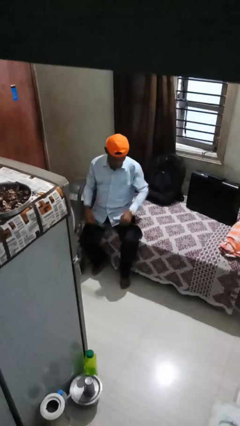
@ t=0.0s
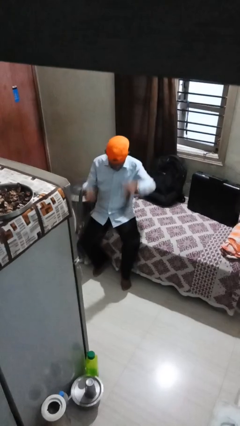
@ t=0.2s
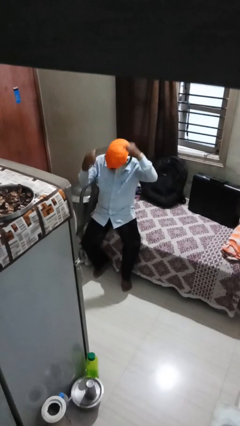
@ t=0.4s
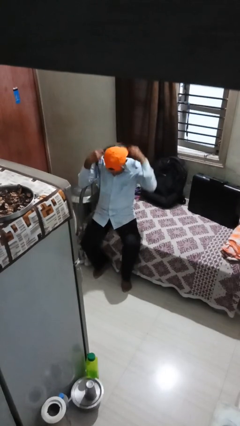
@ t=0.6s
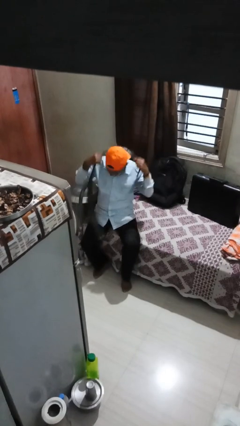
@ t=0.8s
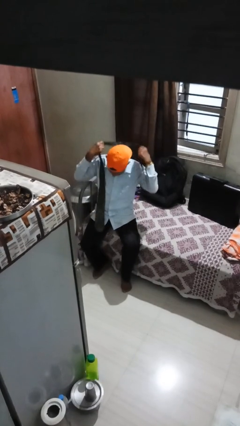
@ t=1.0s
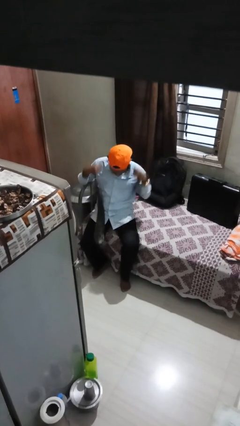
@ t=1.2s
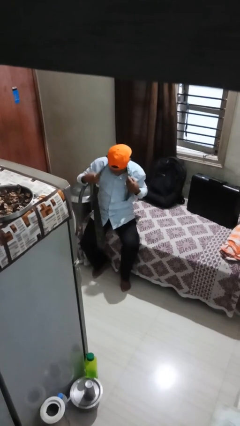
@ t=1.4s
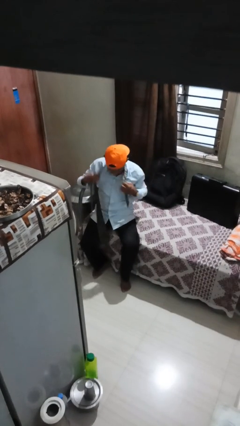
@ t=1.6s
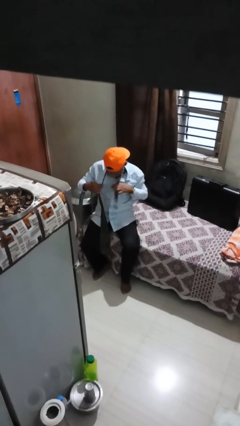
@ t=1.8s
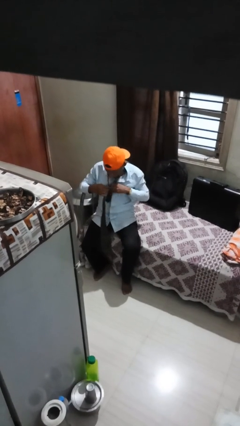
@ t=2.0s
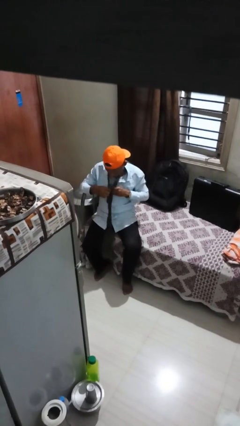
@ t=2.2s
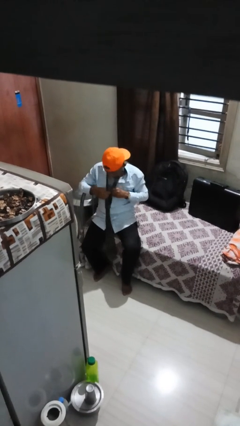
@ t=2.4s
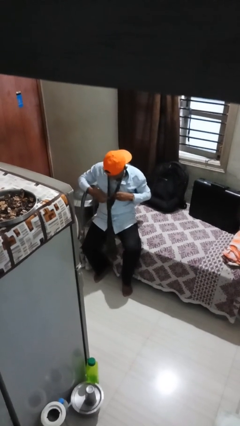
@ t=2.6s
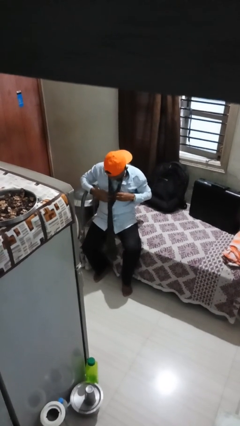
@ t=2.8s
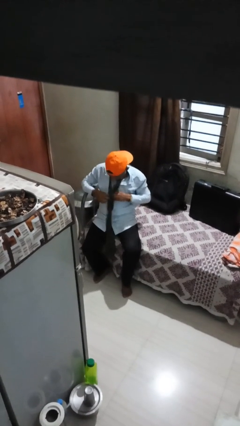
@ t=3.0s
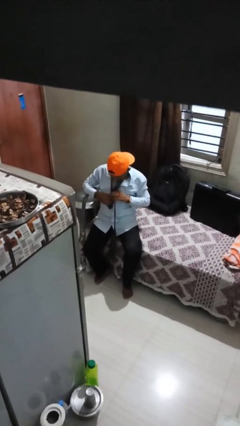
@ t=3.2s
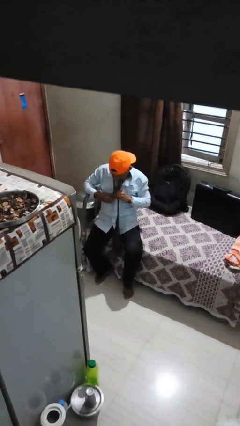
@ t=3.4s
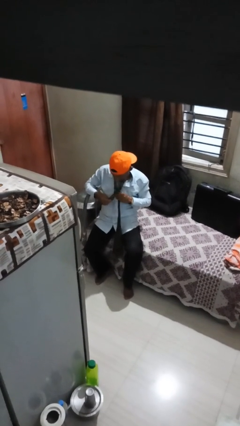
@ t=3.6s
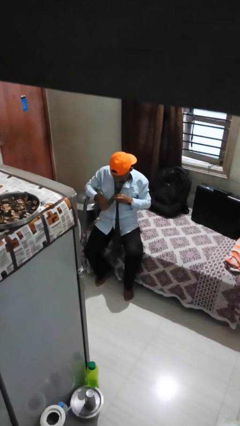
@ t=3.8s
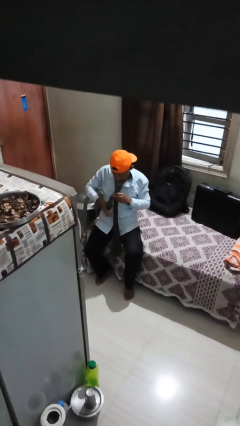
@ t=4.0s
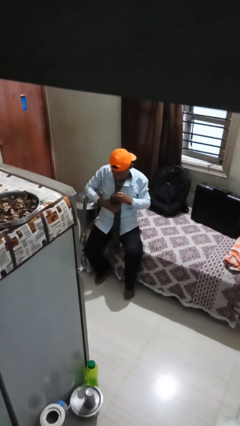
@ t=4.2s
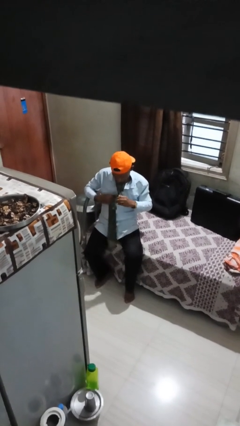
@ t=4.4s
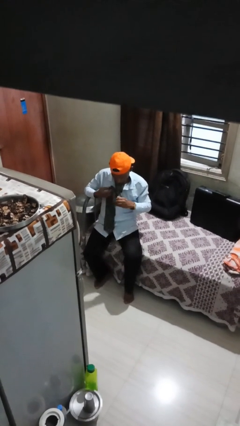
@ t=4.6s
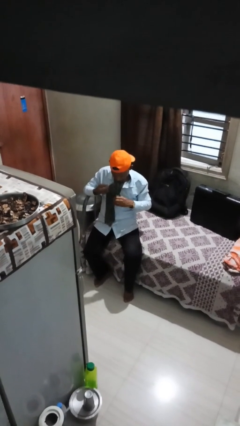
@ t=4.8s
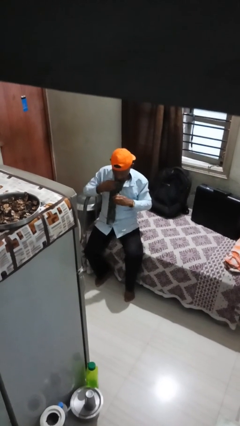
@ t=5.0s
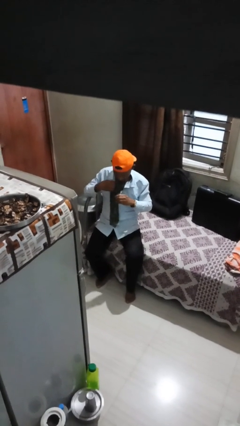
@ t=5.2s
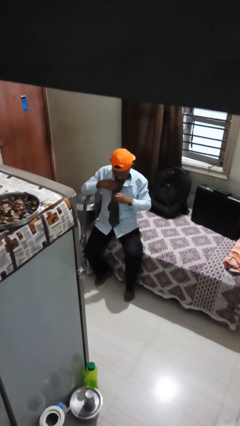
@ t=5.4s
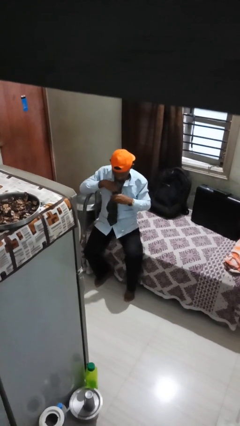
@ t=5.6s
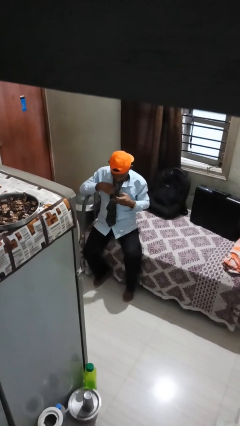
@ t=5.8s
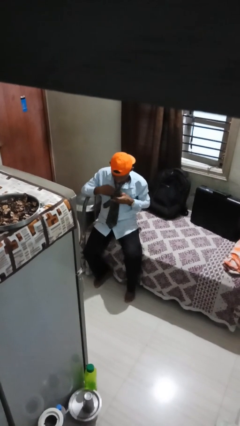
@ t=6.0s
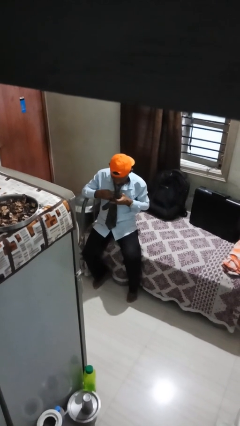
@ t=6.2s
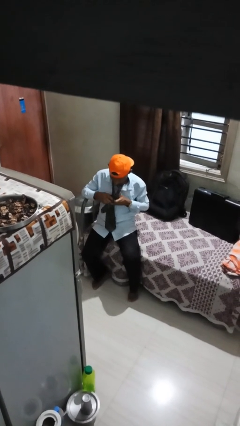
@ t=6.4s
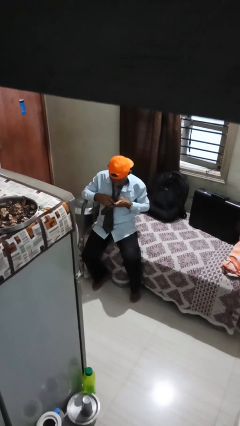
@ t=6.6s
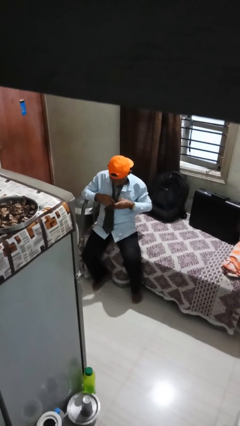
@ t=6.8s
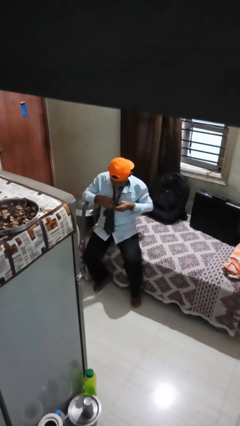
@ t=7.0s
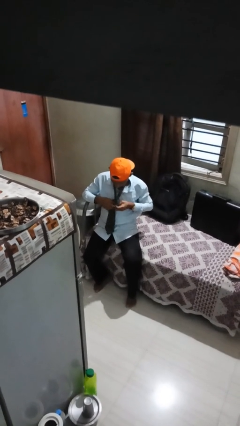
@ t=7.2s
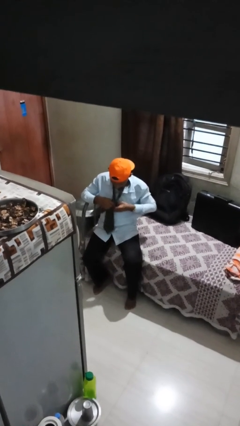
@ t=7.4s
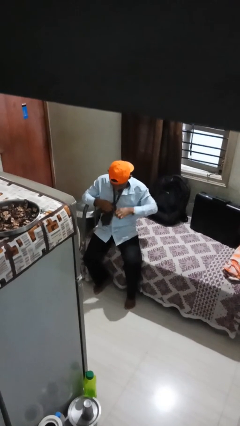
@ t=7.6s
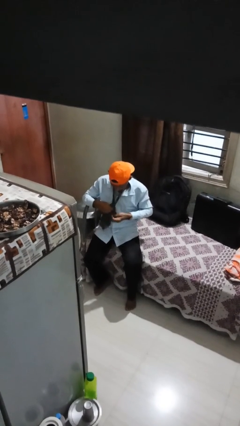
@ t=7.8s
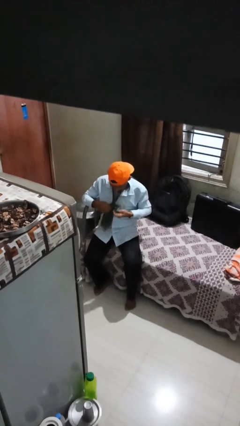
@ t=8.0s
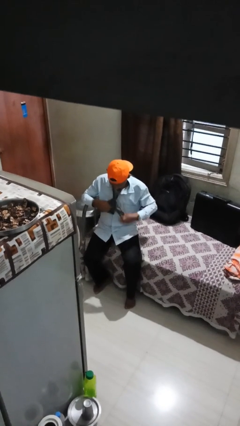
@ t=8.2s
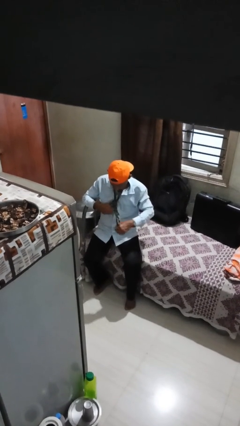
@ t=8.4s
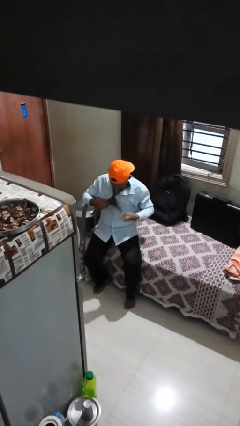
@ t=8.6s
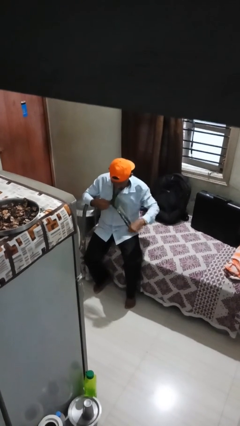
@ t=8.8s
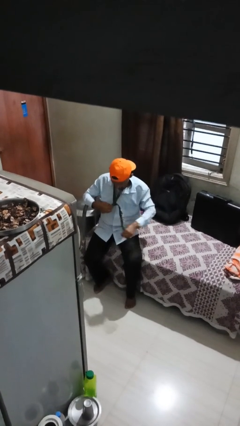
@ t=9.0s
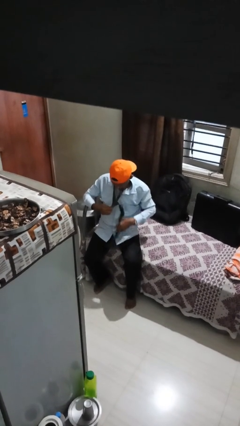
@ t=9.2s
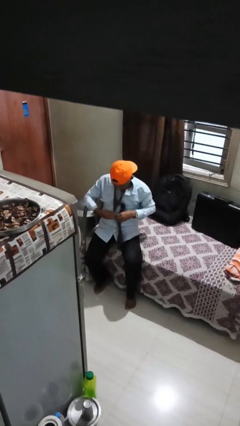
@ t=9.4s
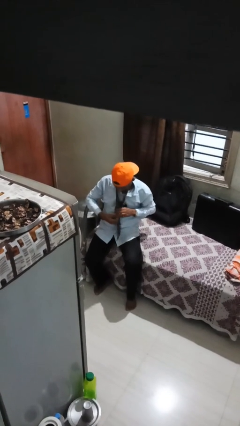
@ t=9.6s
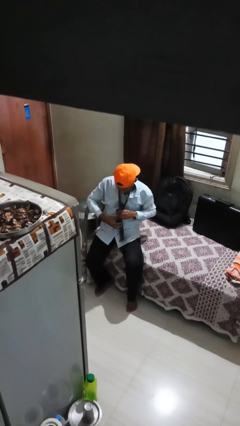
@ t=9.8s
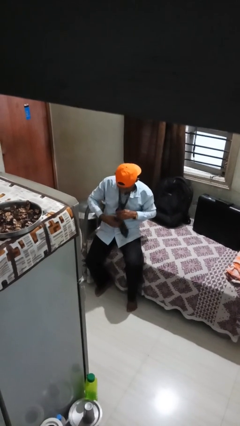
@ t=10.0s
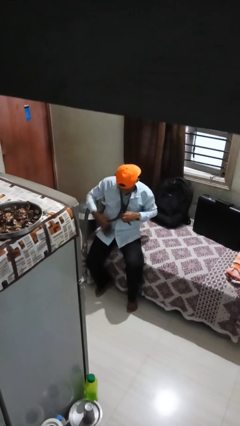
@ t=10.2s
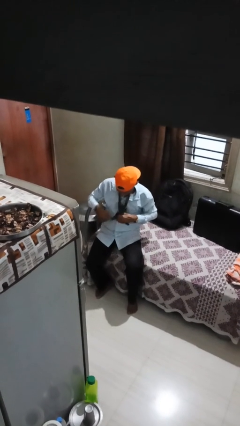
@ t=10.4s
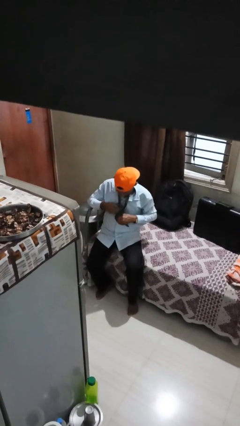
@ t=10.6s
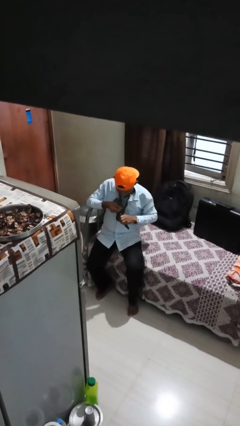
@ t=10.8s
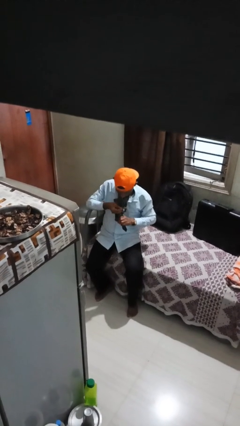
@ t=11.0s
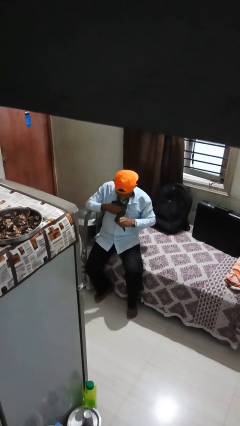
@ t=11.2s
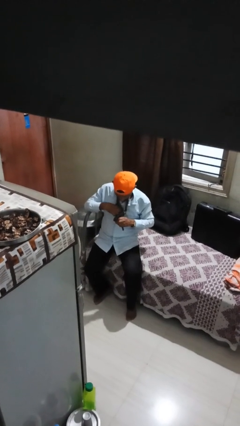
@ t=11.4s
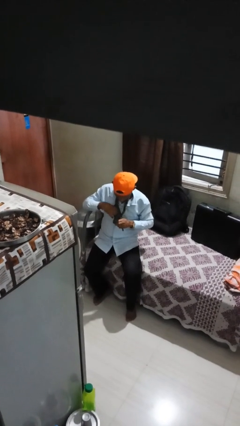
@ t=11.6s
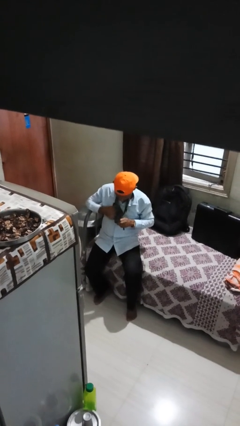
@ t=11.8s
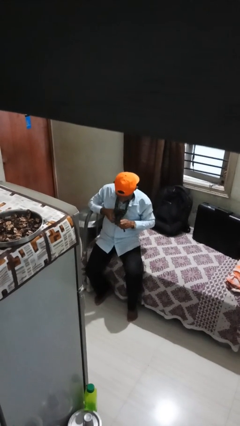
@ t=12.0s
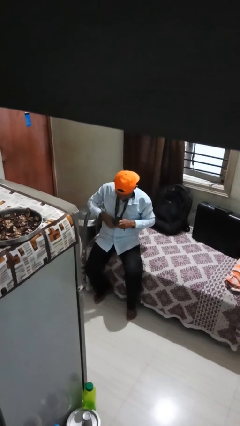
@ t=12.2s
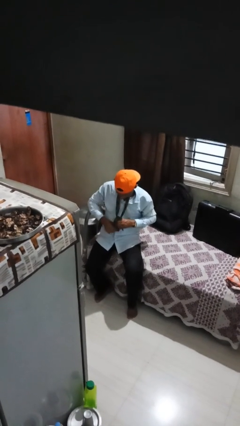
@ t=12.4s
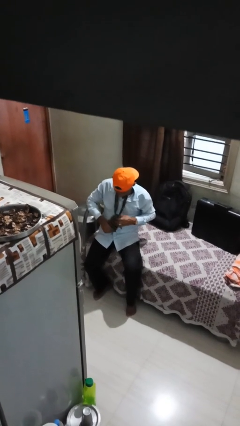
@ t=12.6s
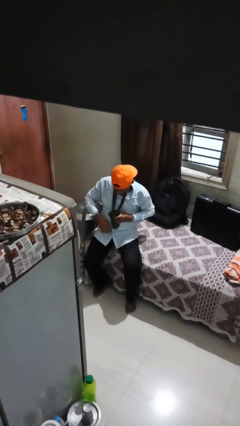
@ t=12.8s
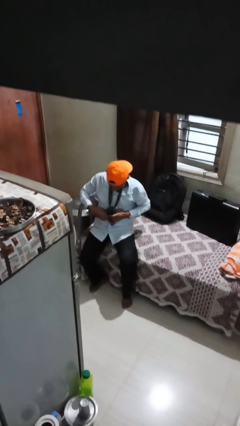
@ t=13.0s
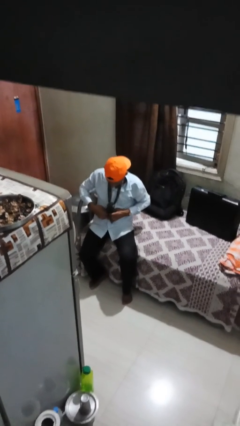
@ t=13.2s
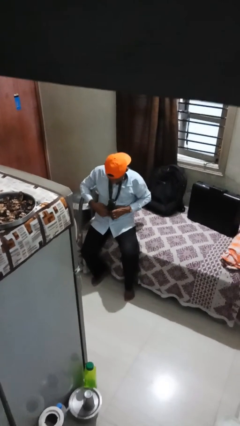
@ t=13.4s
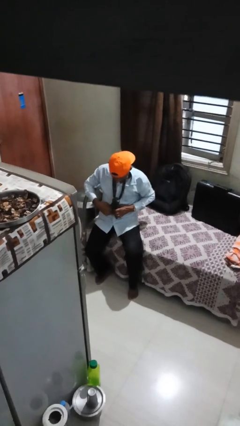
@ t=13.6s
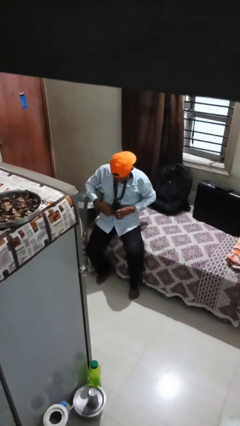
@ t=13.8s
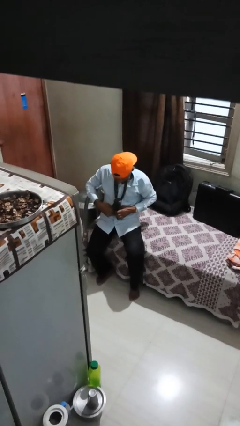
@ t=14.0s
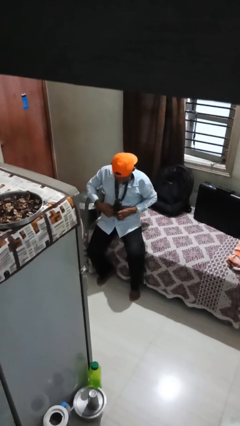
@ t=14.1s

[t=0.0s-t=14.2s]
person puts on necktie

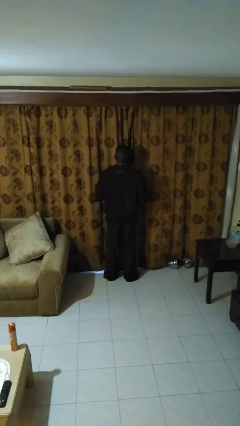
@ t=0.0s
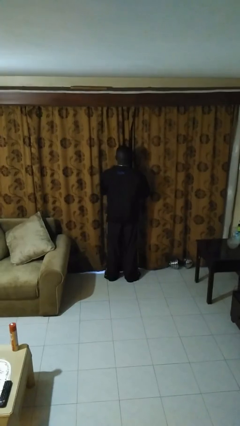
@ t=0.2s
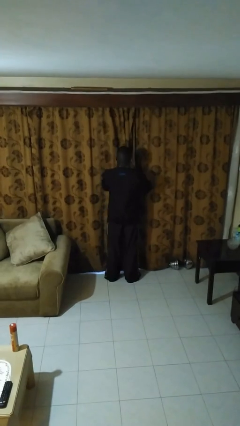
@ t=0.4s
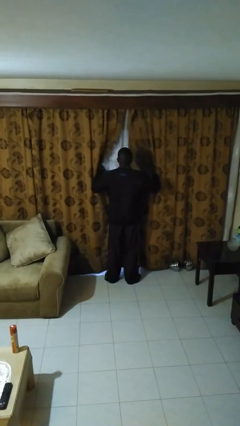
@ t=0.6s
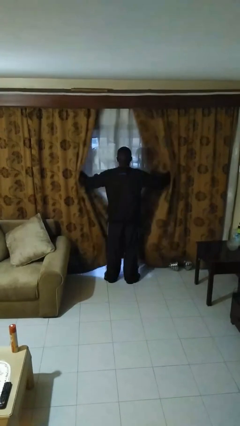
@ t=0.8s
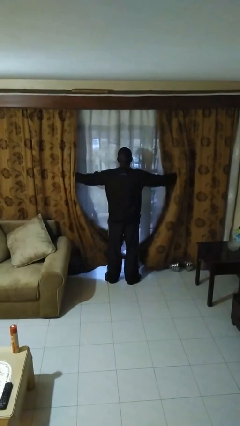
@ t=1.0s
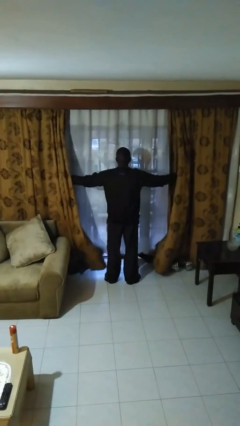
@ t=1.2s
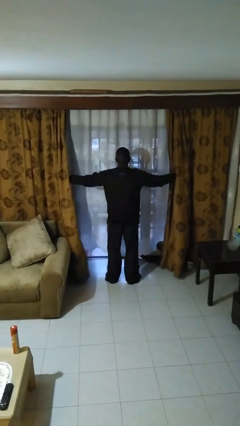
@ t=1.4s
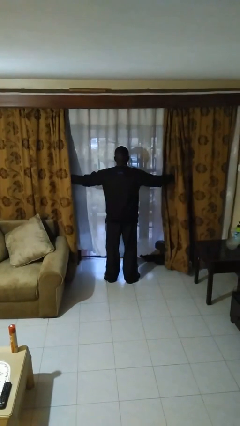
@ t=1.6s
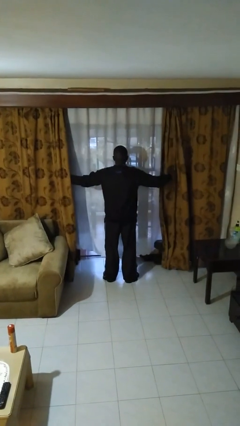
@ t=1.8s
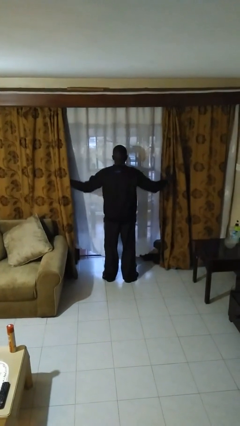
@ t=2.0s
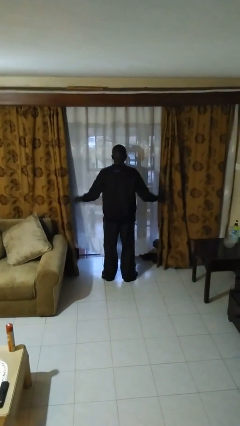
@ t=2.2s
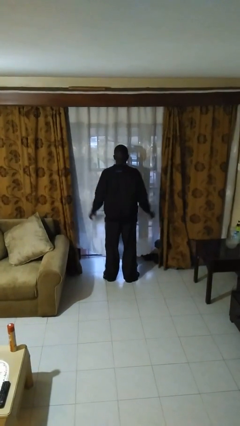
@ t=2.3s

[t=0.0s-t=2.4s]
person opens curtains

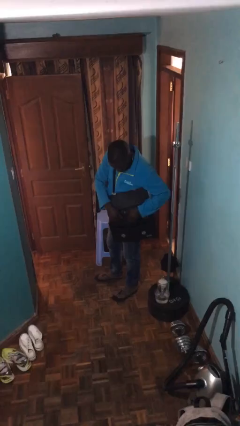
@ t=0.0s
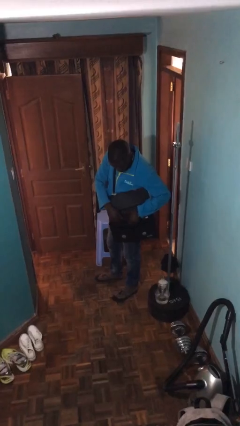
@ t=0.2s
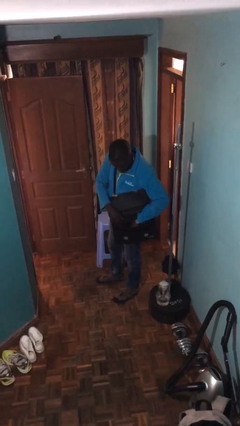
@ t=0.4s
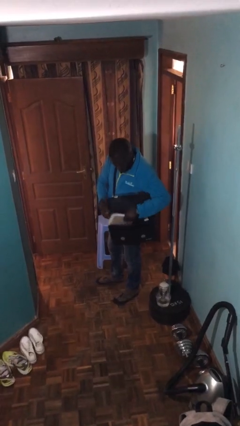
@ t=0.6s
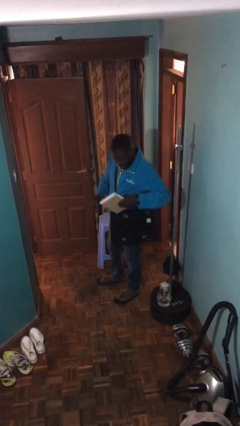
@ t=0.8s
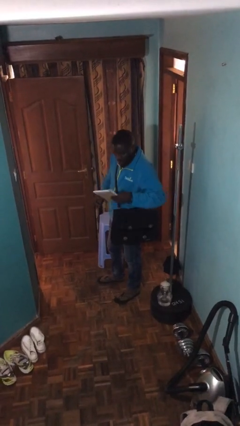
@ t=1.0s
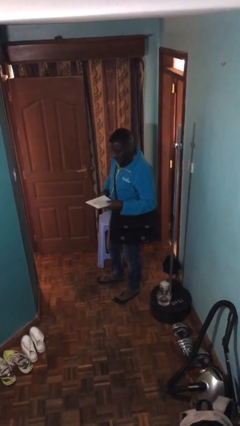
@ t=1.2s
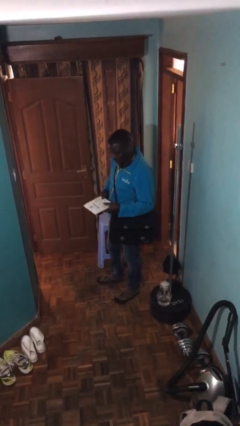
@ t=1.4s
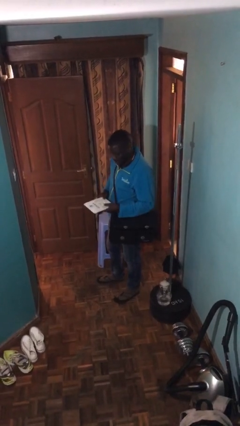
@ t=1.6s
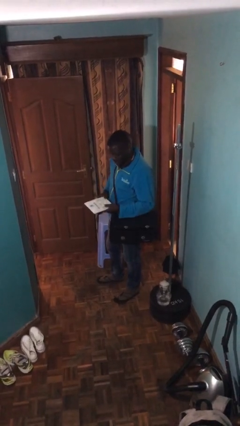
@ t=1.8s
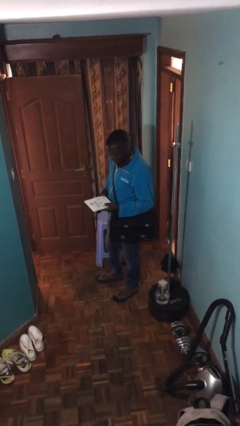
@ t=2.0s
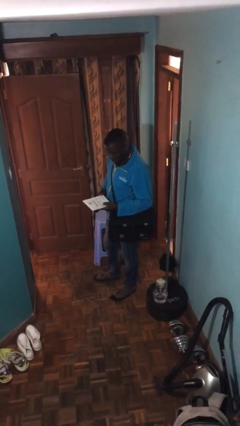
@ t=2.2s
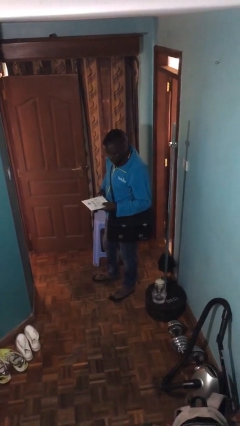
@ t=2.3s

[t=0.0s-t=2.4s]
person takes object from purse